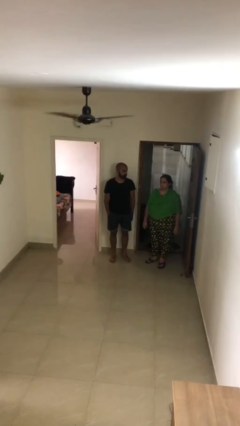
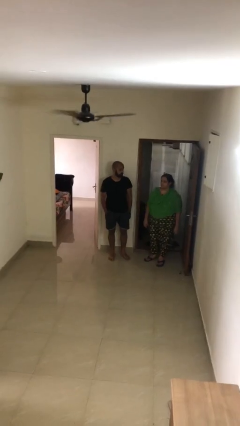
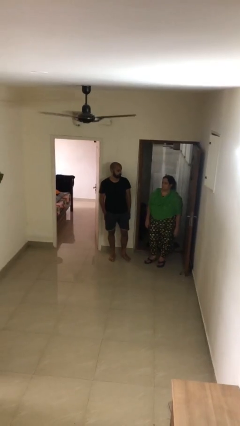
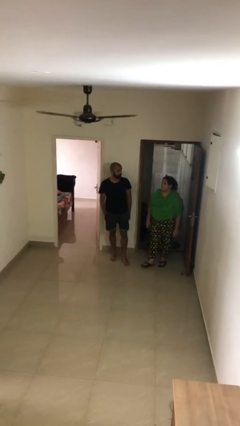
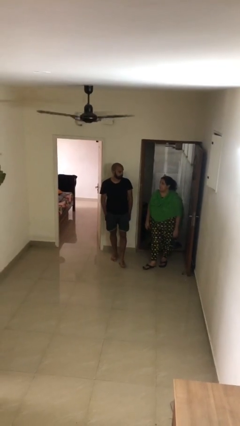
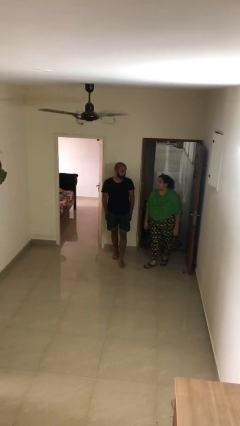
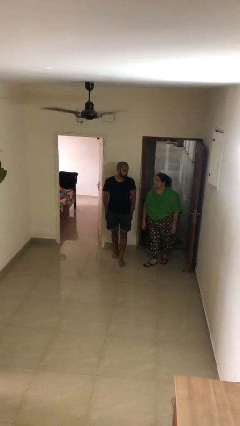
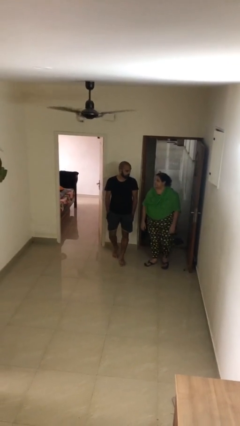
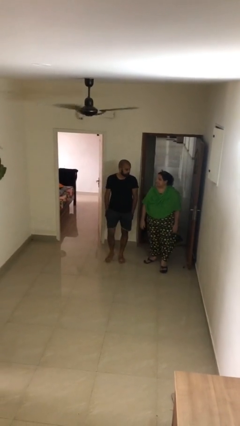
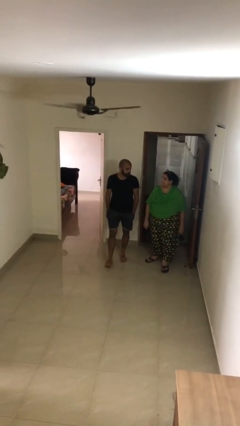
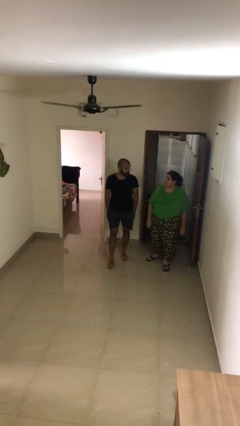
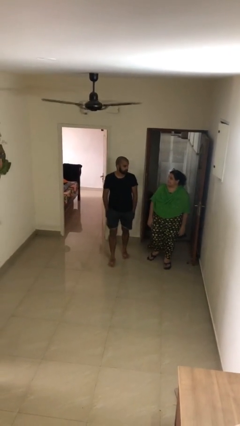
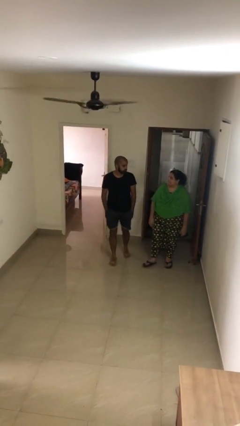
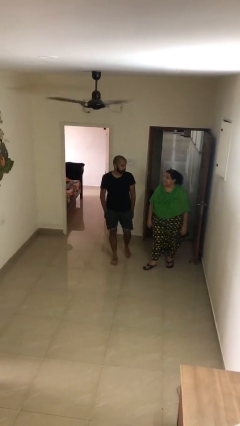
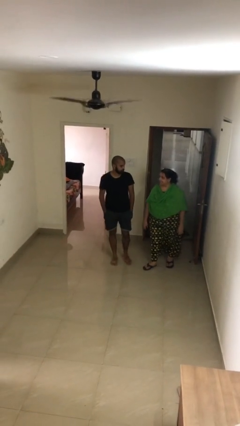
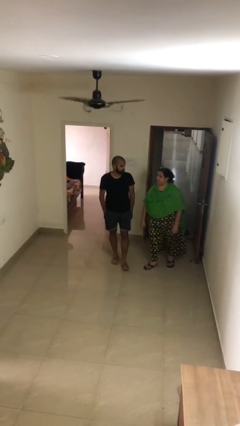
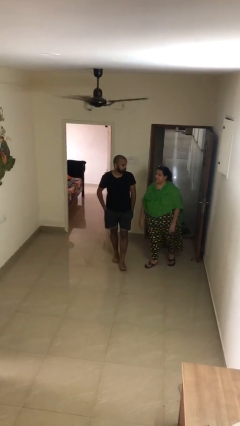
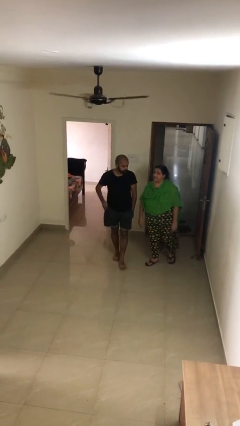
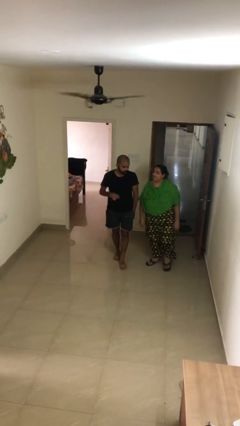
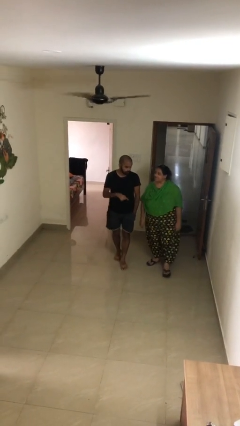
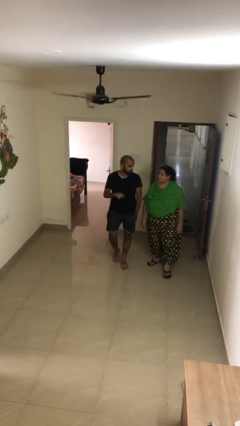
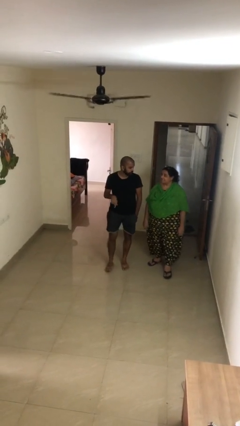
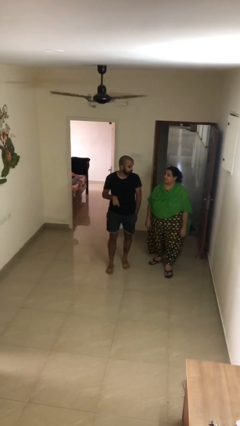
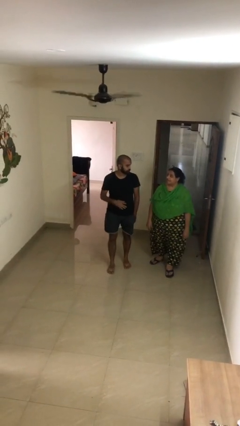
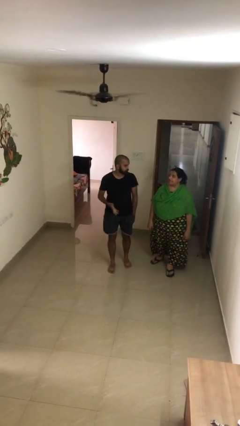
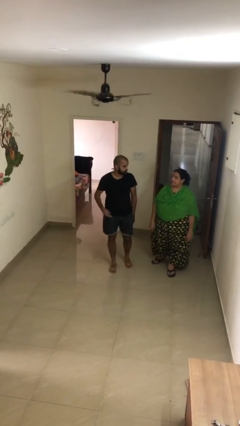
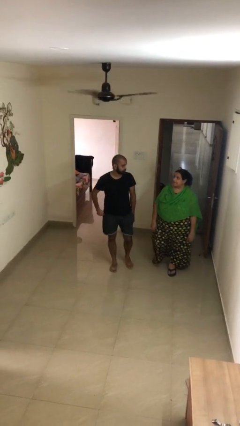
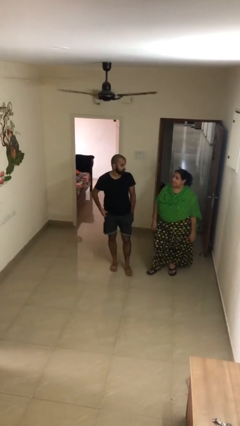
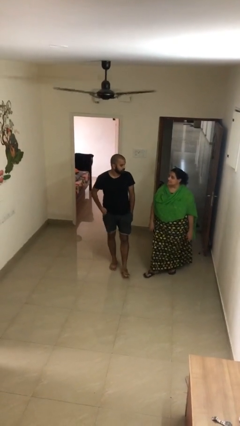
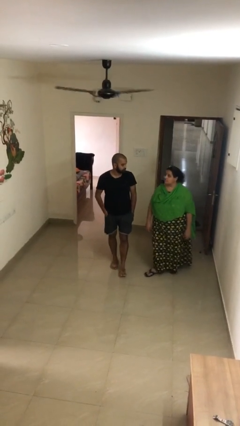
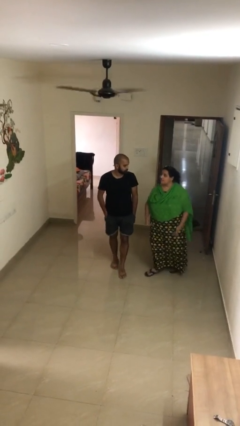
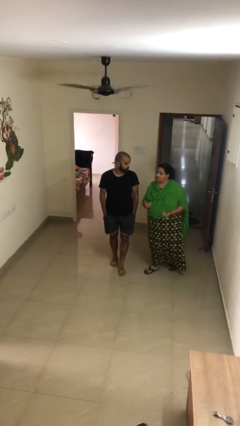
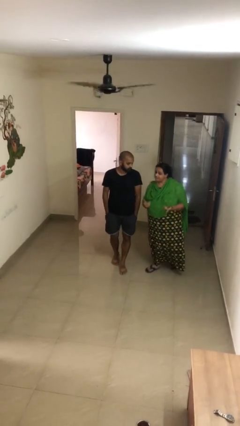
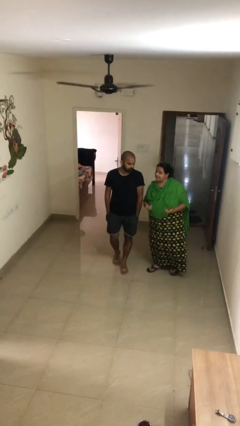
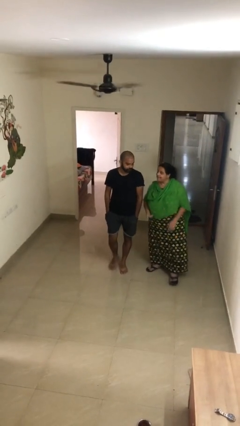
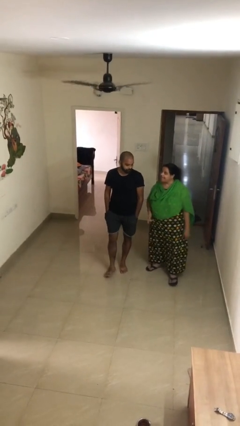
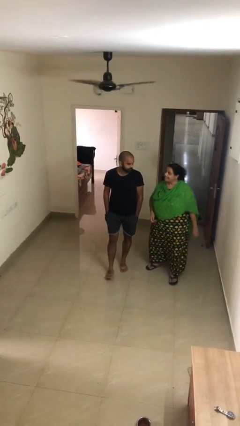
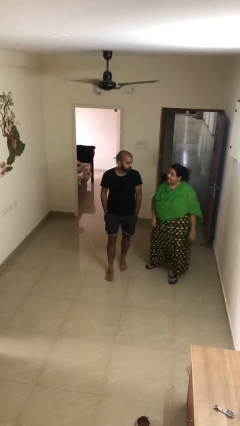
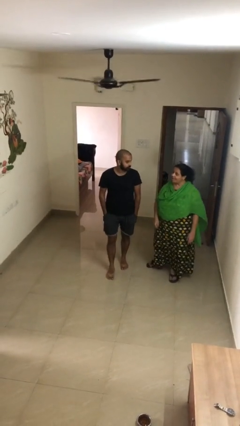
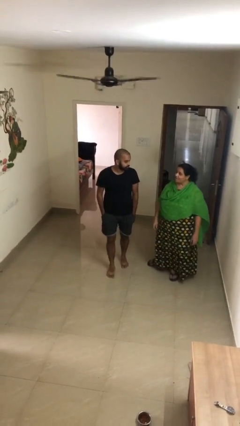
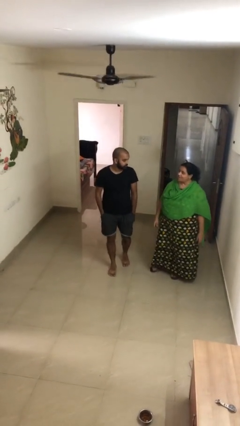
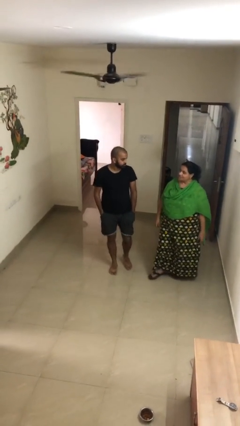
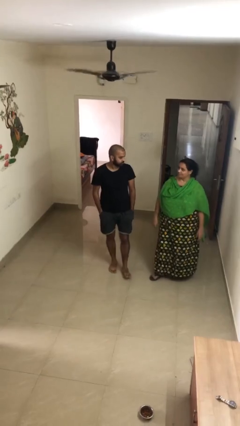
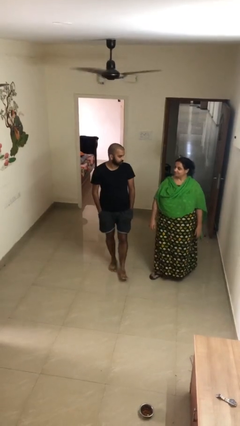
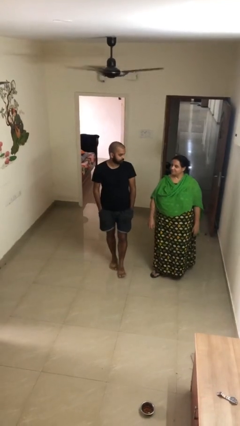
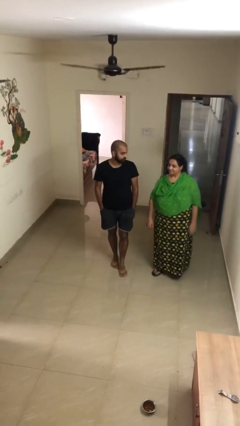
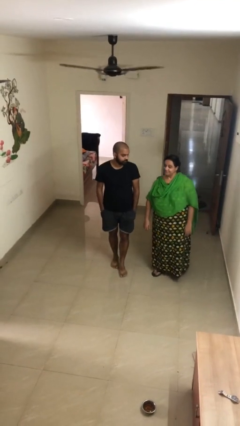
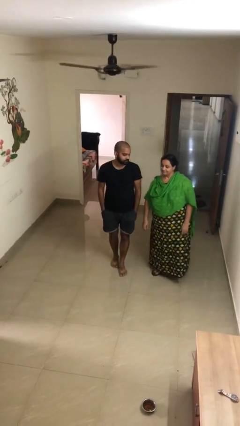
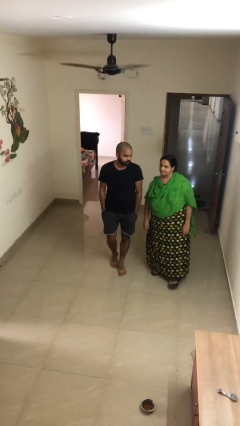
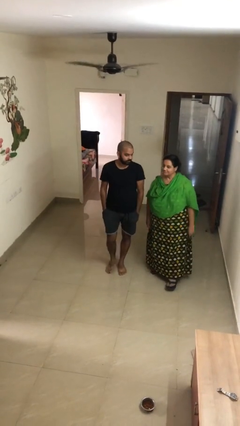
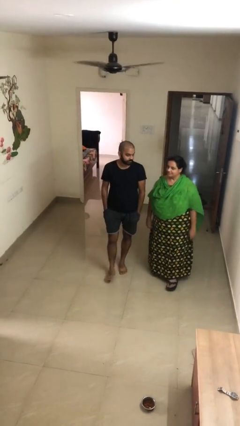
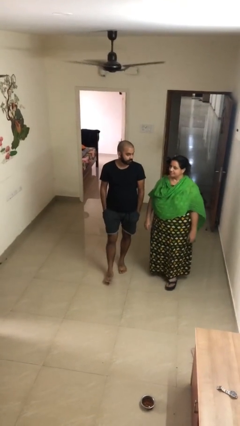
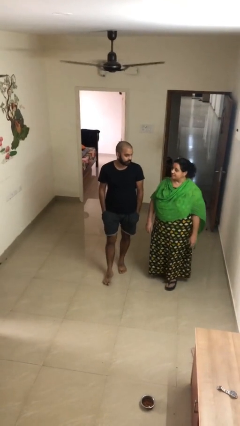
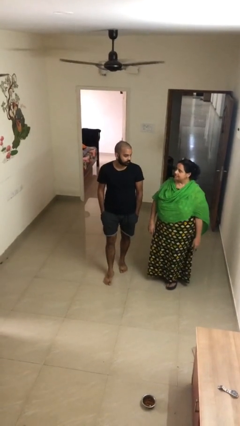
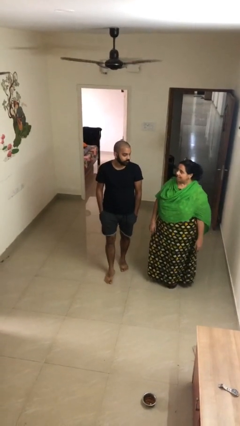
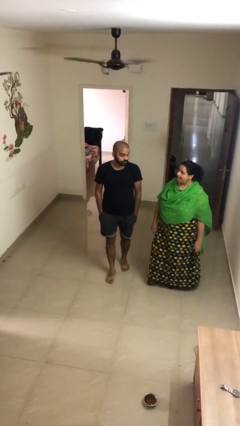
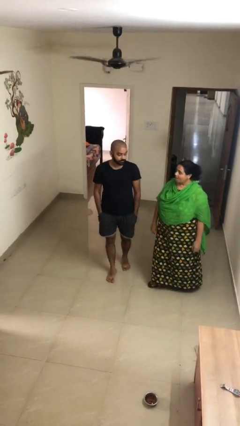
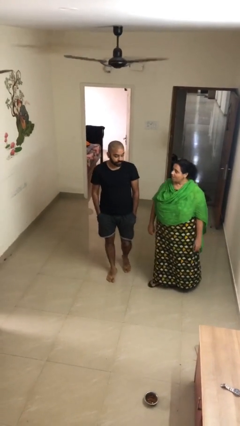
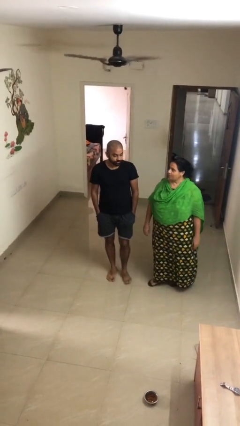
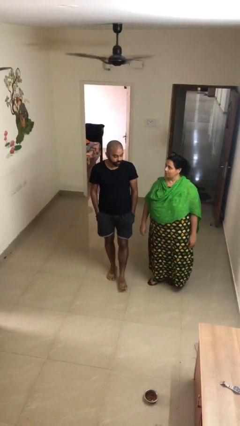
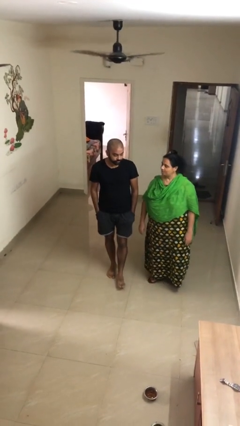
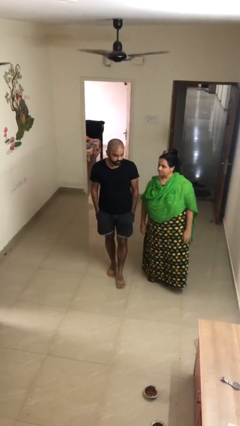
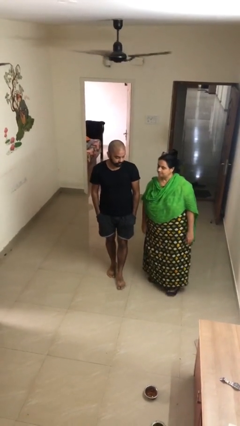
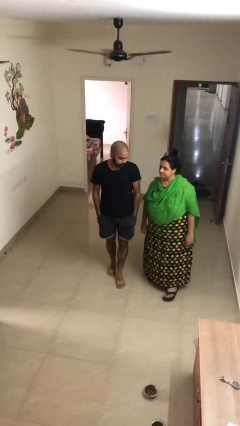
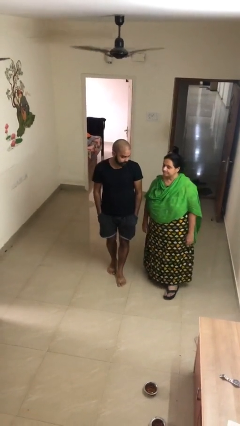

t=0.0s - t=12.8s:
person talks to person

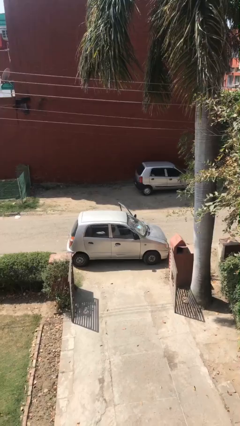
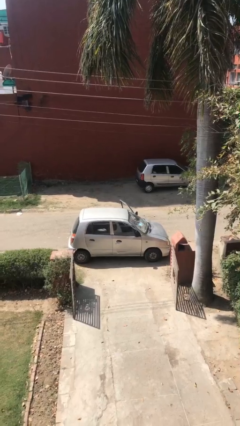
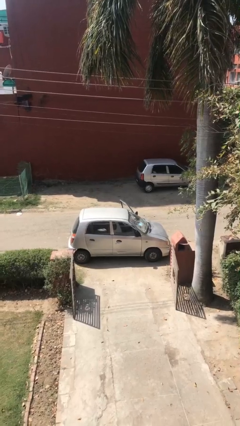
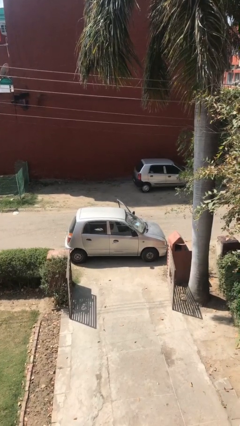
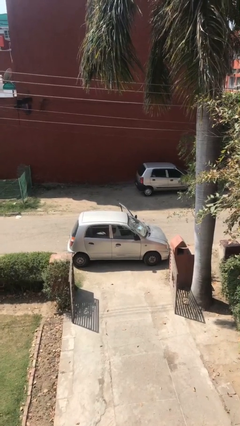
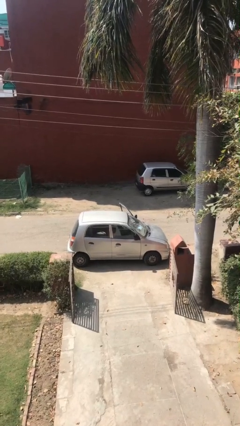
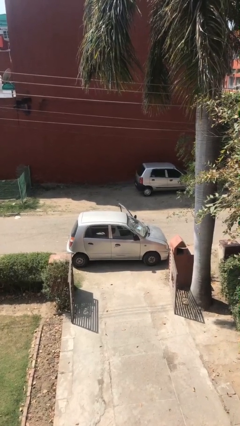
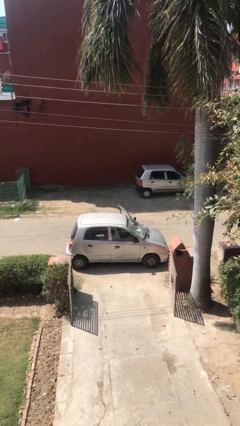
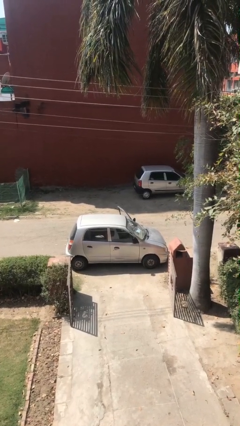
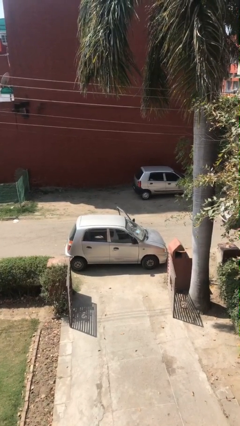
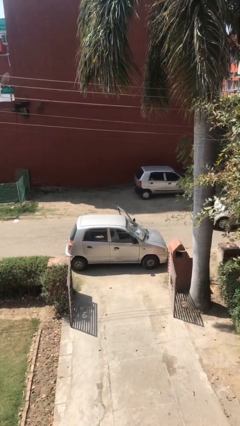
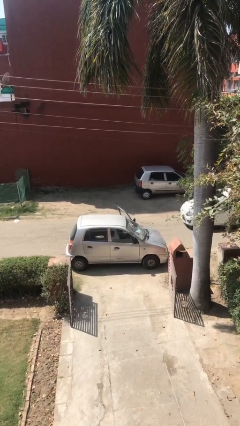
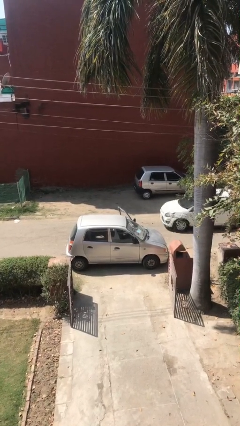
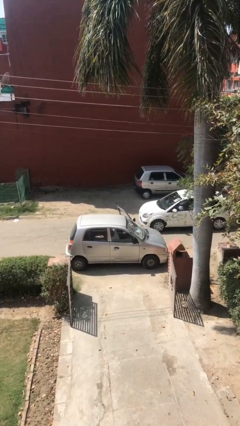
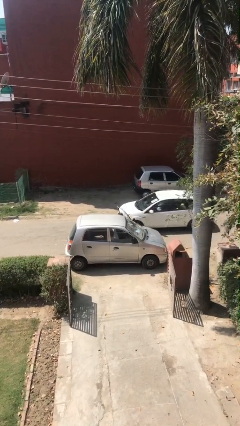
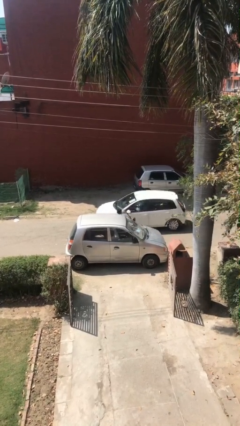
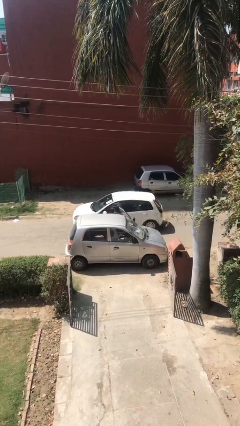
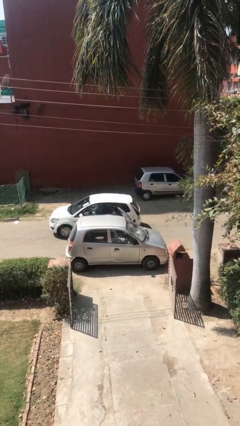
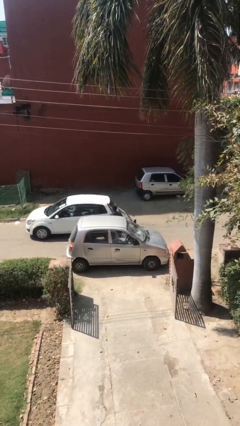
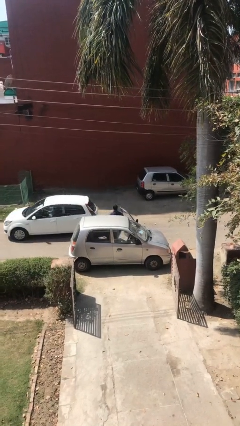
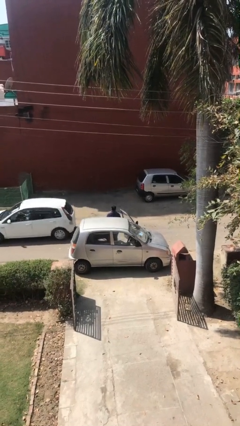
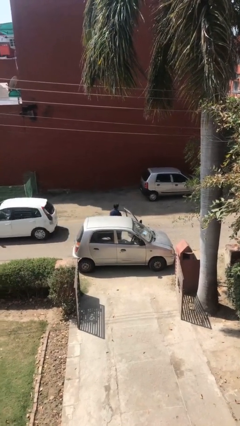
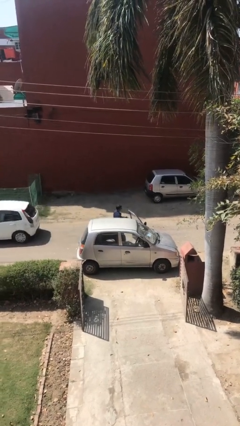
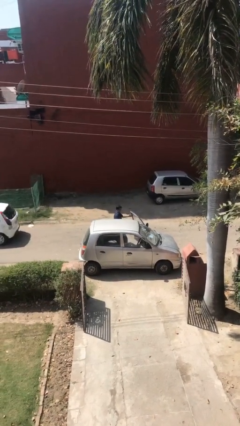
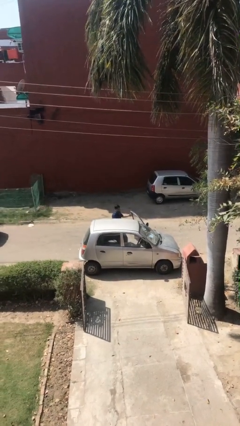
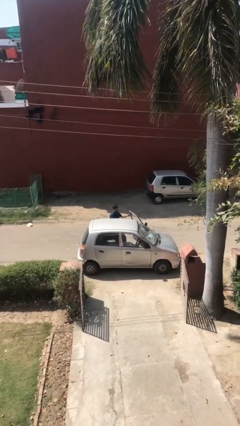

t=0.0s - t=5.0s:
person exits car
